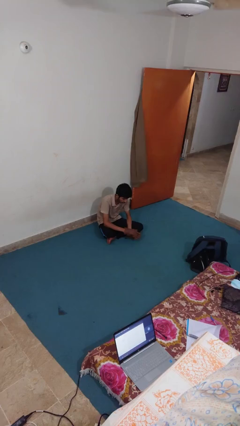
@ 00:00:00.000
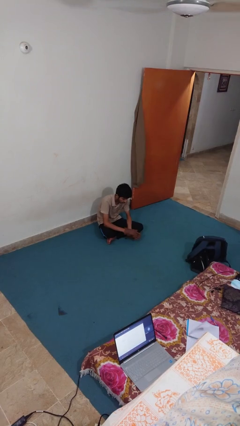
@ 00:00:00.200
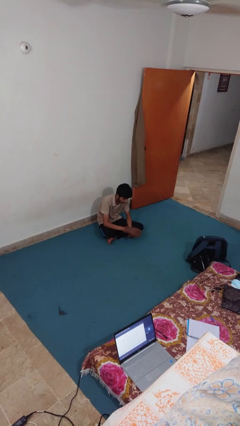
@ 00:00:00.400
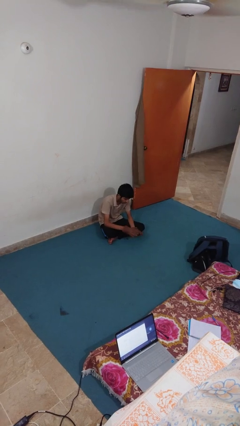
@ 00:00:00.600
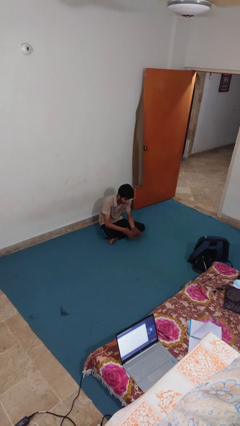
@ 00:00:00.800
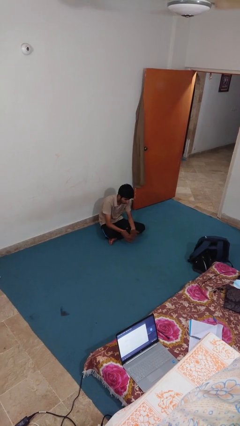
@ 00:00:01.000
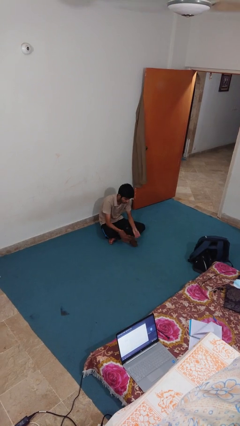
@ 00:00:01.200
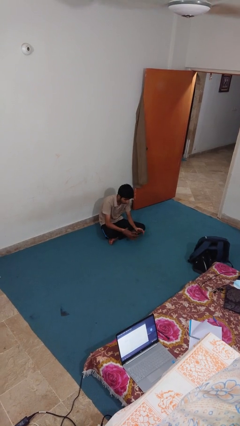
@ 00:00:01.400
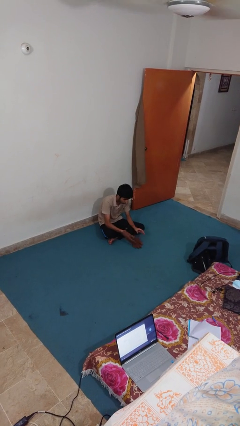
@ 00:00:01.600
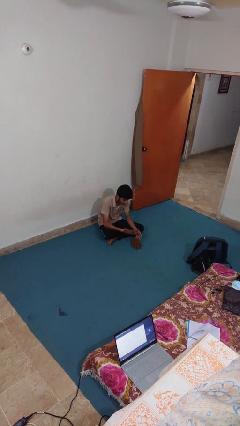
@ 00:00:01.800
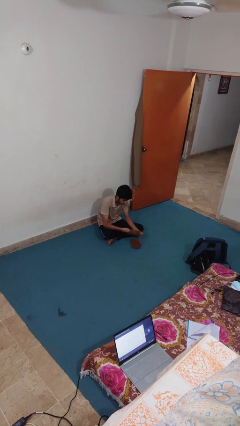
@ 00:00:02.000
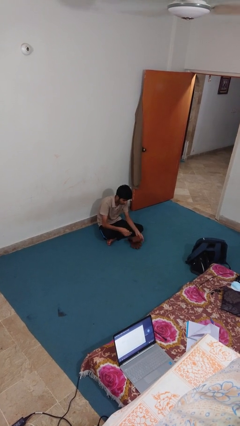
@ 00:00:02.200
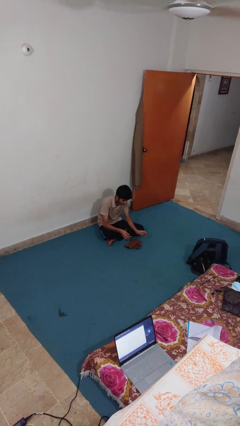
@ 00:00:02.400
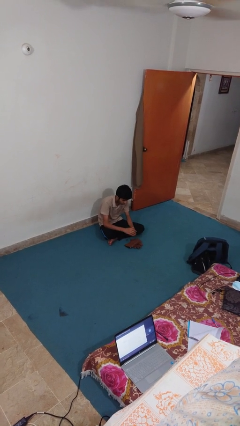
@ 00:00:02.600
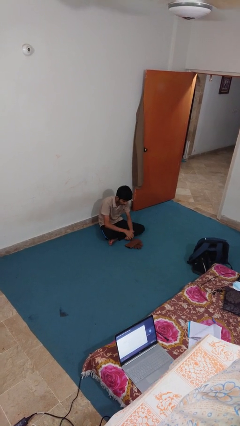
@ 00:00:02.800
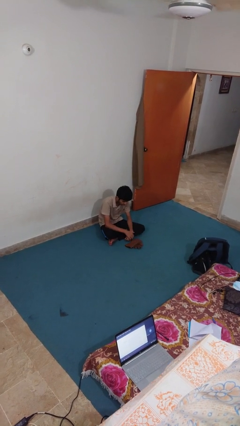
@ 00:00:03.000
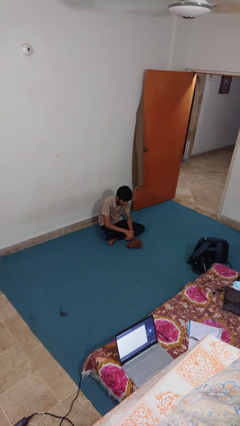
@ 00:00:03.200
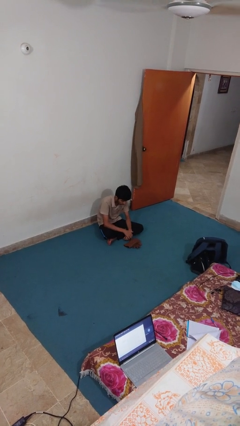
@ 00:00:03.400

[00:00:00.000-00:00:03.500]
person takes off gloves

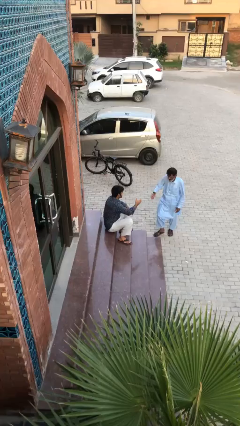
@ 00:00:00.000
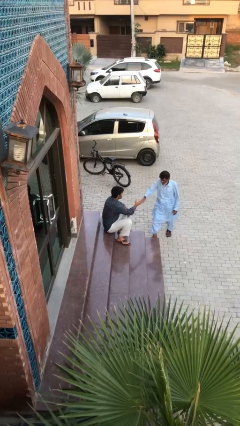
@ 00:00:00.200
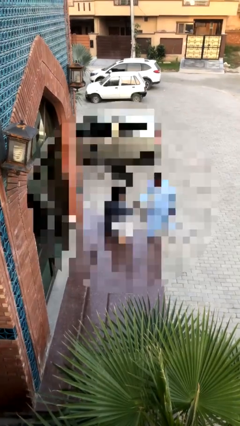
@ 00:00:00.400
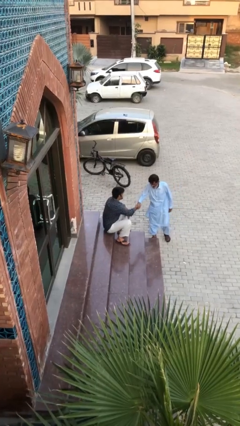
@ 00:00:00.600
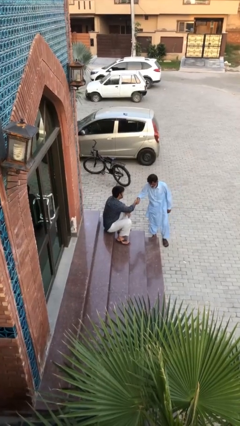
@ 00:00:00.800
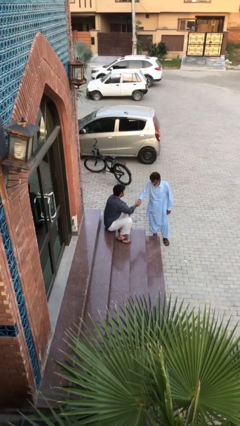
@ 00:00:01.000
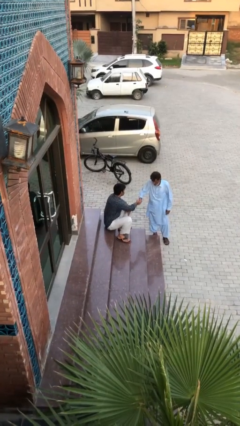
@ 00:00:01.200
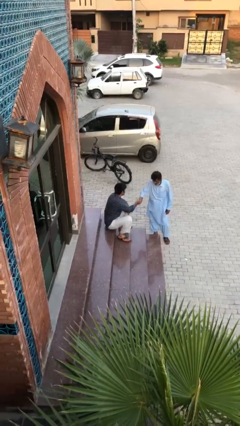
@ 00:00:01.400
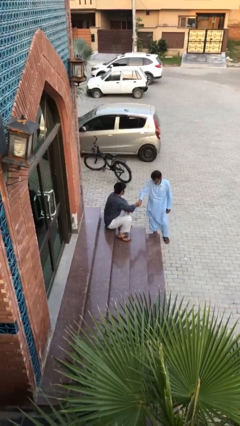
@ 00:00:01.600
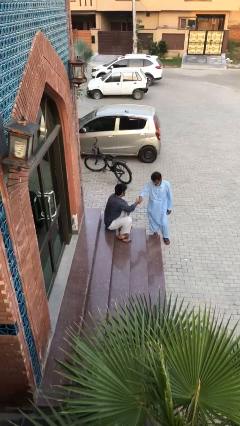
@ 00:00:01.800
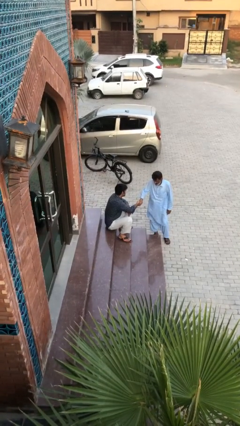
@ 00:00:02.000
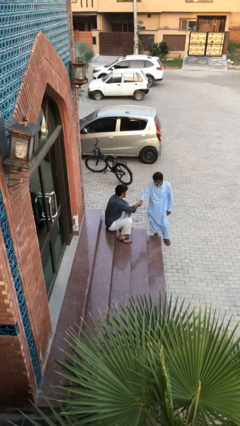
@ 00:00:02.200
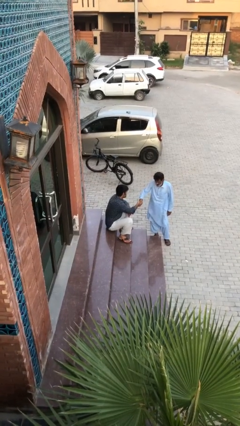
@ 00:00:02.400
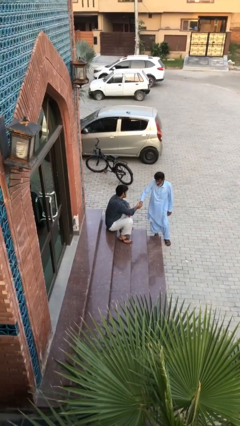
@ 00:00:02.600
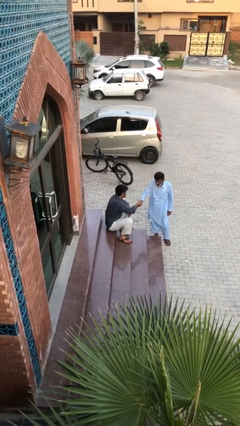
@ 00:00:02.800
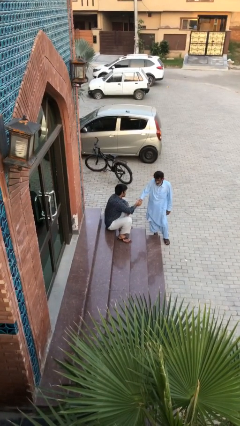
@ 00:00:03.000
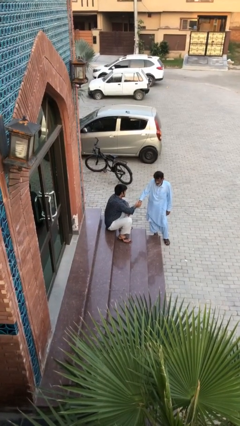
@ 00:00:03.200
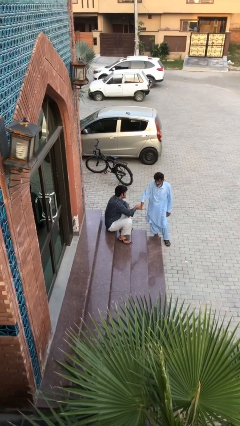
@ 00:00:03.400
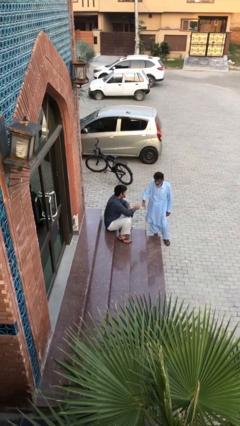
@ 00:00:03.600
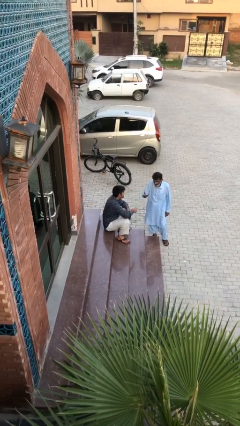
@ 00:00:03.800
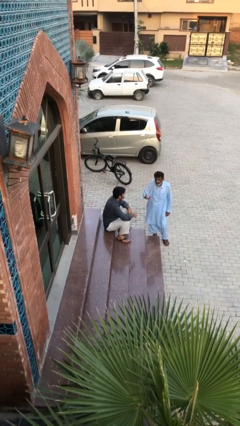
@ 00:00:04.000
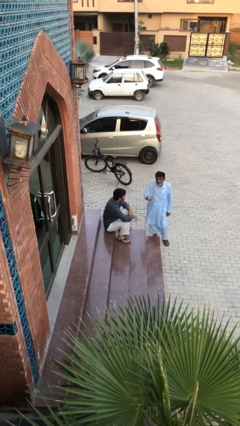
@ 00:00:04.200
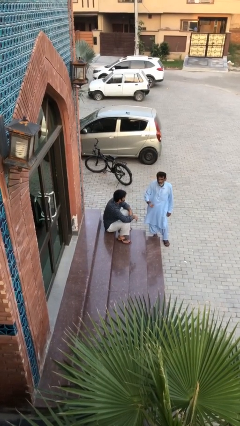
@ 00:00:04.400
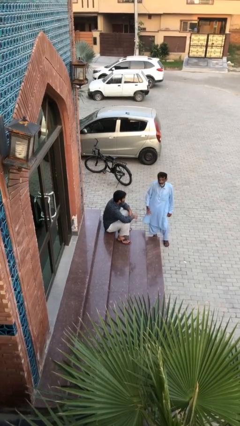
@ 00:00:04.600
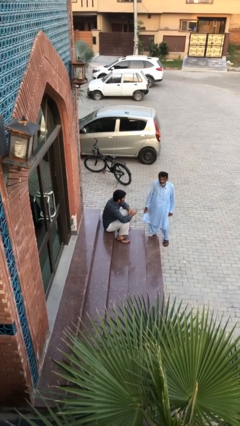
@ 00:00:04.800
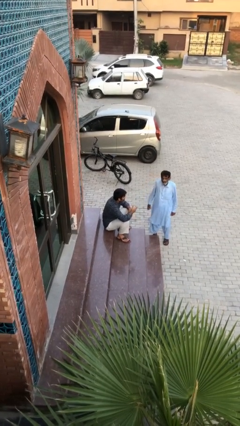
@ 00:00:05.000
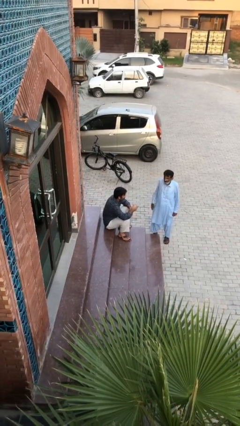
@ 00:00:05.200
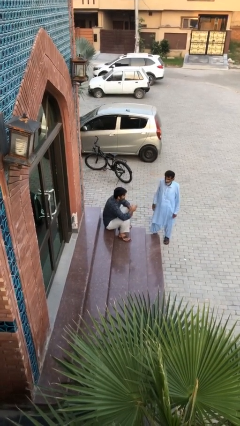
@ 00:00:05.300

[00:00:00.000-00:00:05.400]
person shakes hand

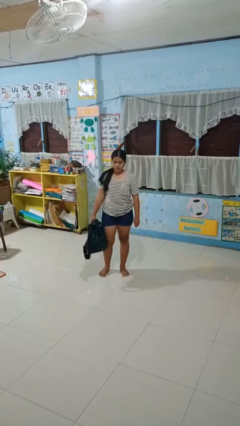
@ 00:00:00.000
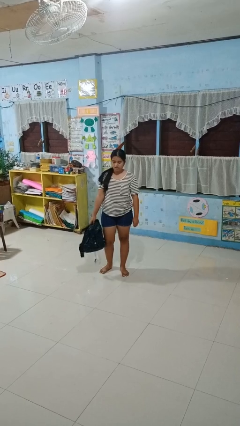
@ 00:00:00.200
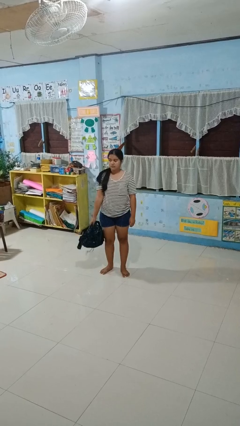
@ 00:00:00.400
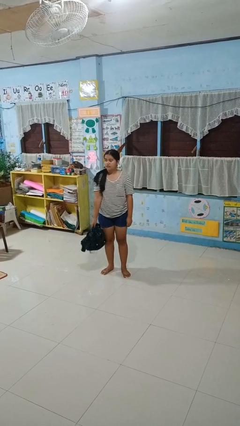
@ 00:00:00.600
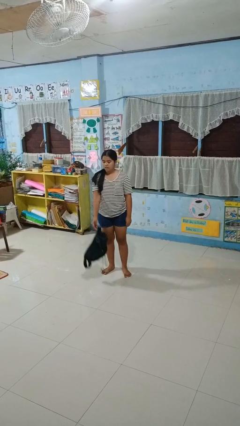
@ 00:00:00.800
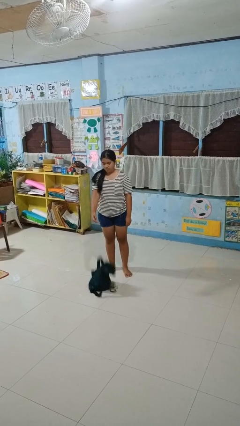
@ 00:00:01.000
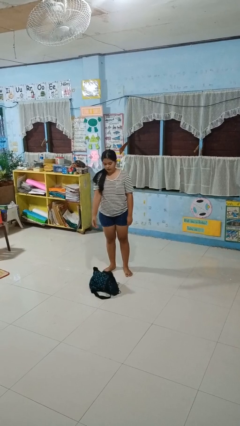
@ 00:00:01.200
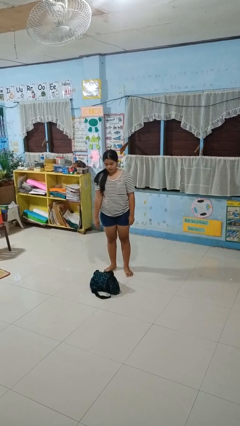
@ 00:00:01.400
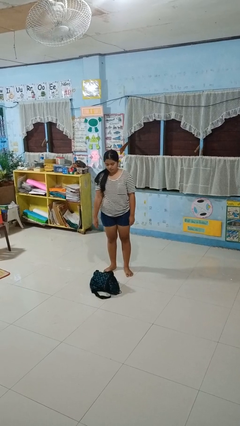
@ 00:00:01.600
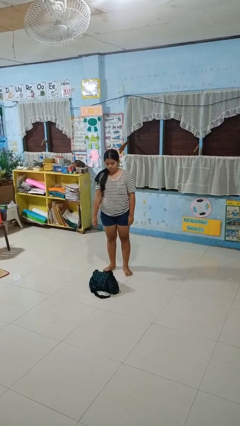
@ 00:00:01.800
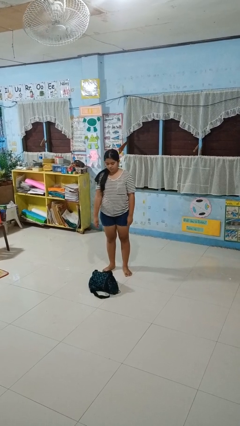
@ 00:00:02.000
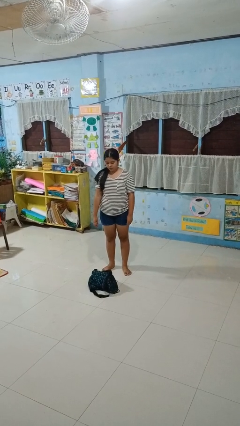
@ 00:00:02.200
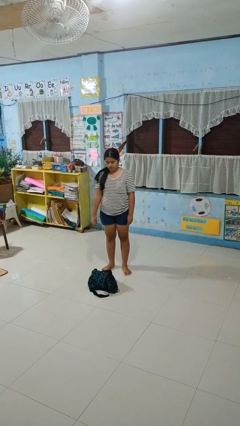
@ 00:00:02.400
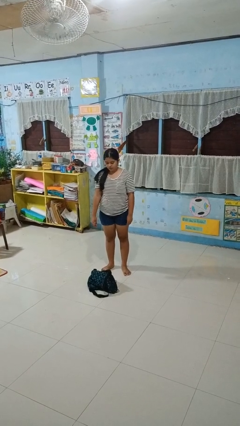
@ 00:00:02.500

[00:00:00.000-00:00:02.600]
person drops object

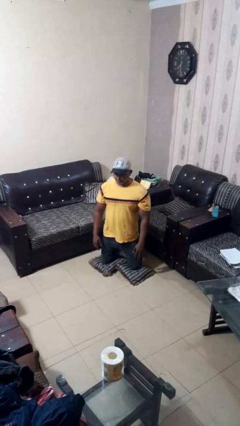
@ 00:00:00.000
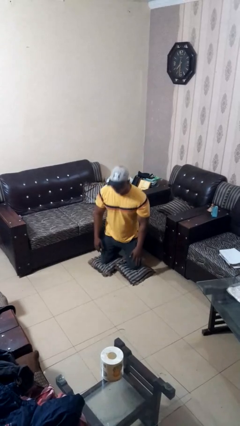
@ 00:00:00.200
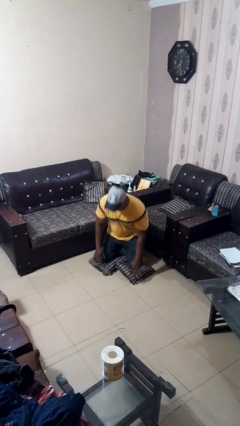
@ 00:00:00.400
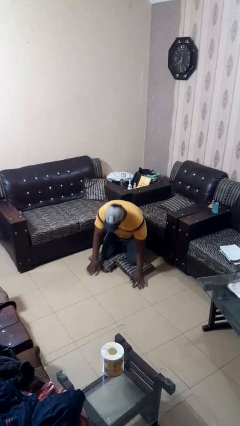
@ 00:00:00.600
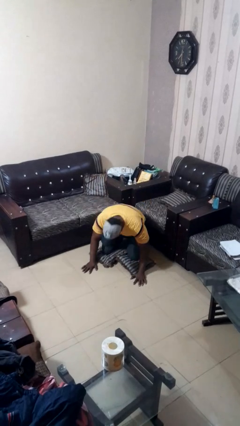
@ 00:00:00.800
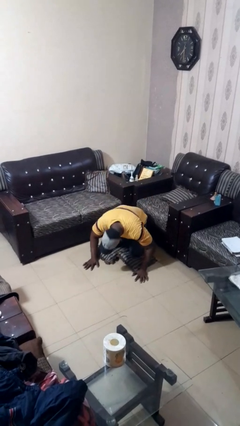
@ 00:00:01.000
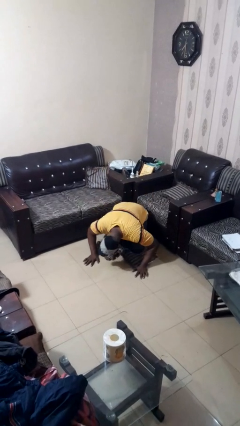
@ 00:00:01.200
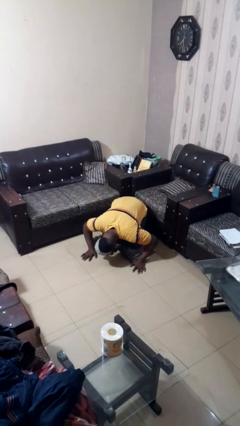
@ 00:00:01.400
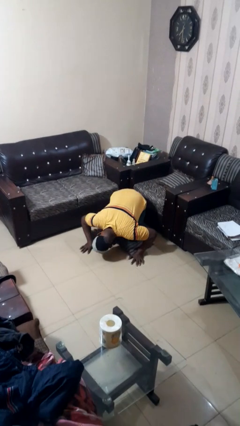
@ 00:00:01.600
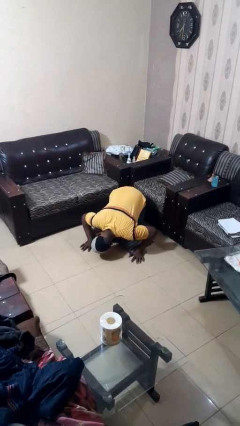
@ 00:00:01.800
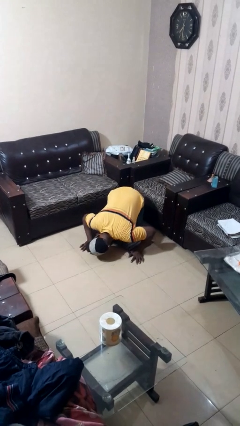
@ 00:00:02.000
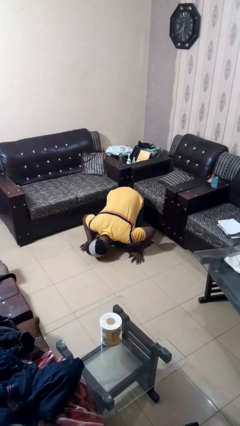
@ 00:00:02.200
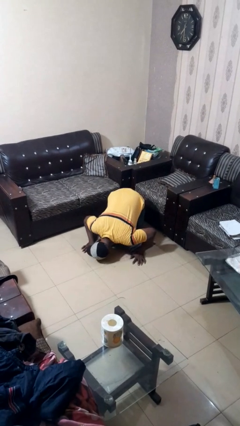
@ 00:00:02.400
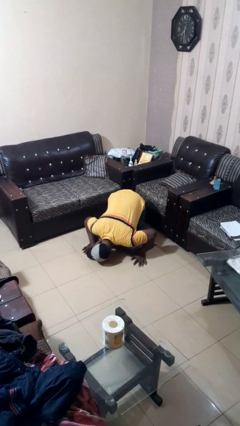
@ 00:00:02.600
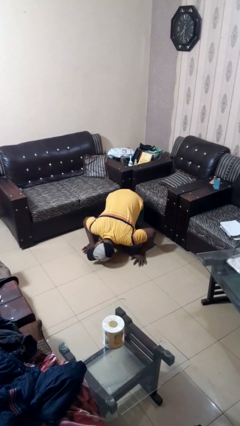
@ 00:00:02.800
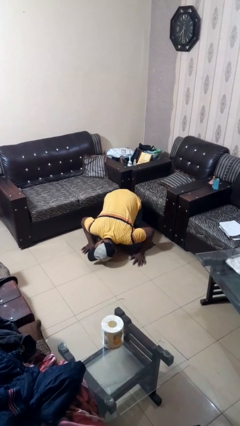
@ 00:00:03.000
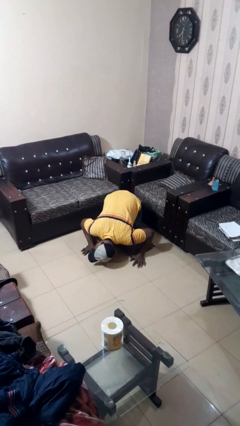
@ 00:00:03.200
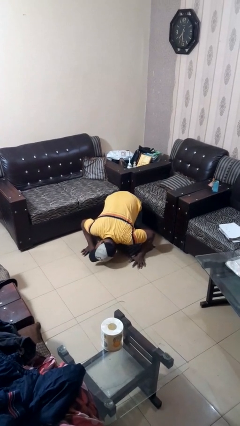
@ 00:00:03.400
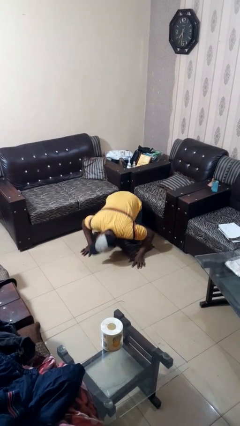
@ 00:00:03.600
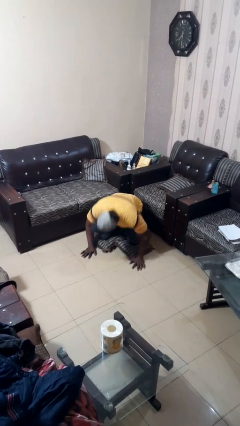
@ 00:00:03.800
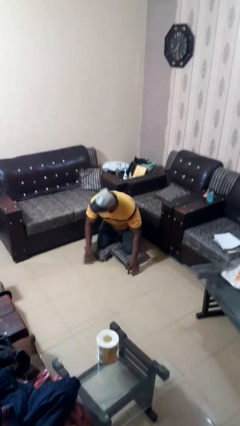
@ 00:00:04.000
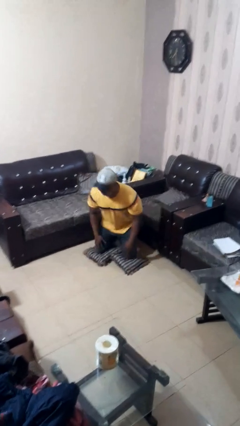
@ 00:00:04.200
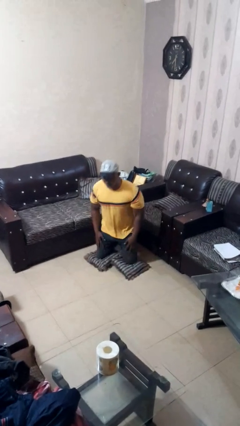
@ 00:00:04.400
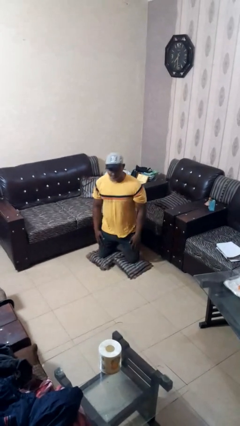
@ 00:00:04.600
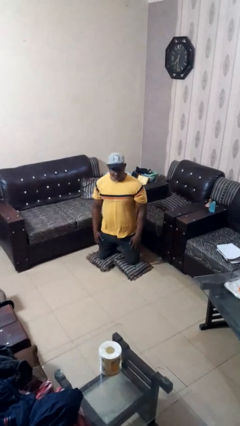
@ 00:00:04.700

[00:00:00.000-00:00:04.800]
person searches under couch

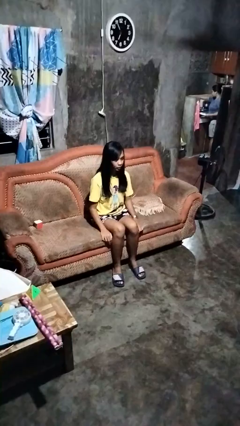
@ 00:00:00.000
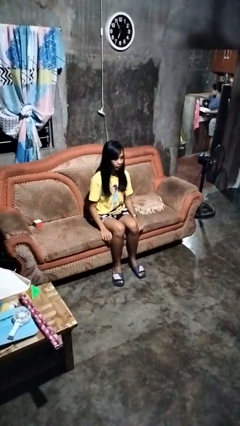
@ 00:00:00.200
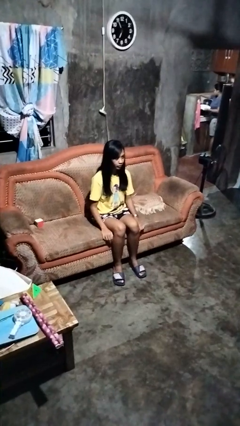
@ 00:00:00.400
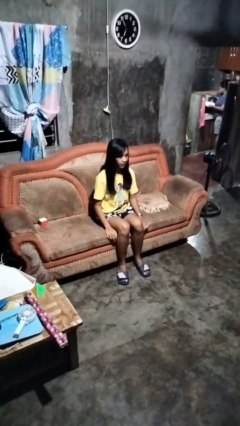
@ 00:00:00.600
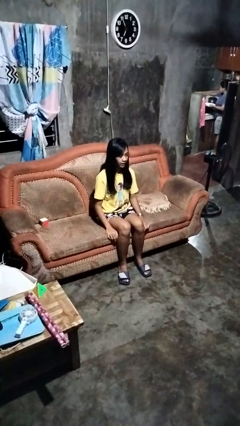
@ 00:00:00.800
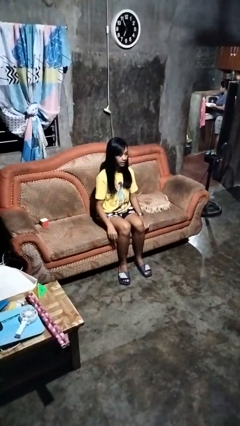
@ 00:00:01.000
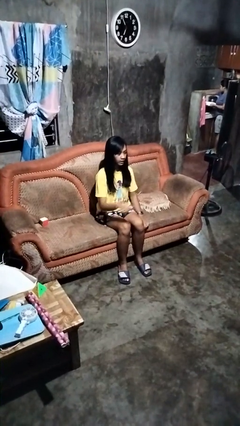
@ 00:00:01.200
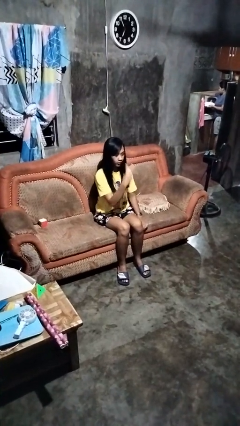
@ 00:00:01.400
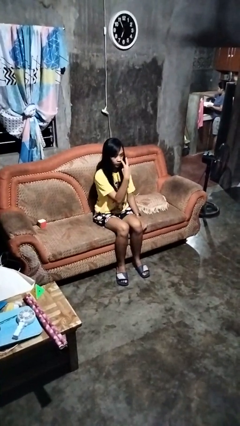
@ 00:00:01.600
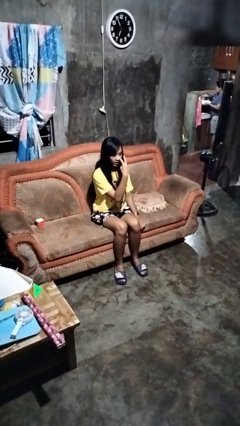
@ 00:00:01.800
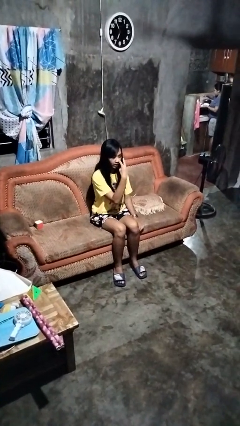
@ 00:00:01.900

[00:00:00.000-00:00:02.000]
person gestures watch closely
